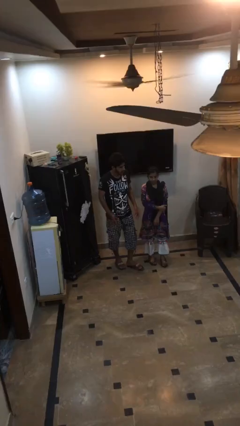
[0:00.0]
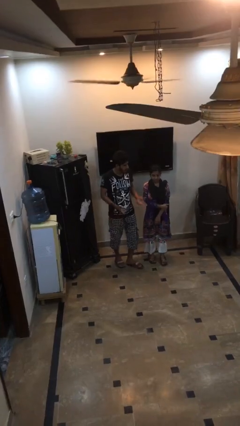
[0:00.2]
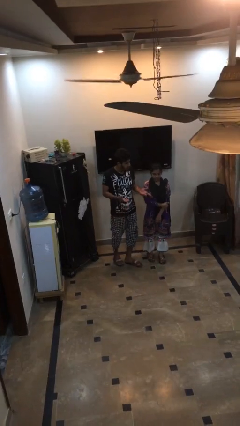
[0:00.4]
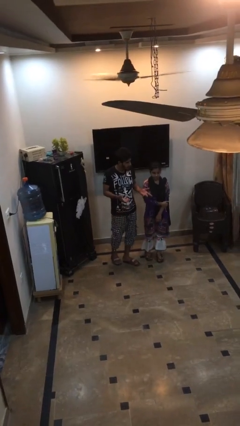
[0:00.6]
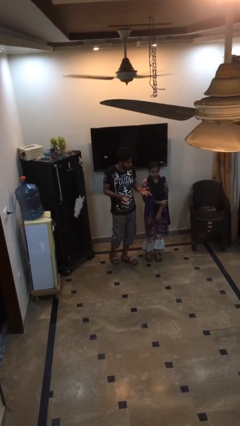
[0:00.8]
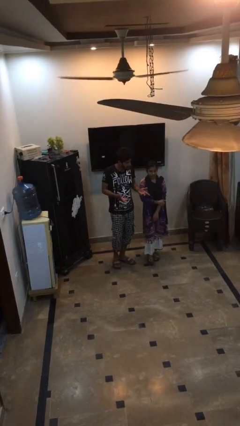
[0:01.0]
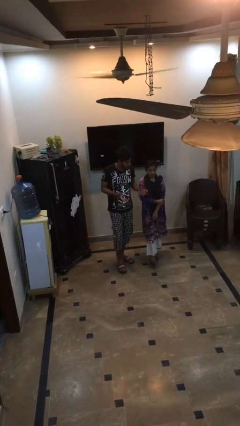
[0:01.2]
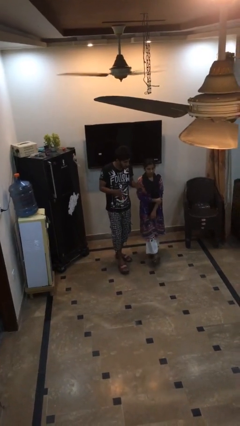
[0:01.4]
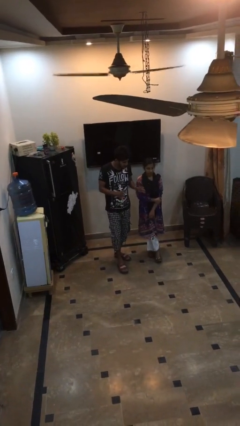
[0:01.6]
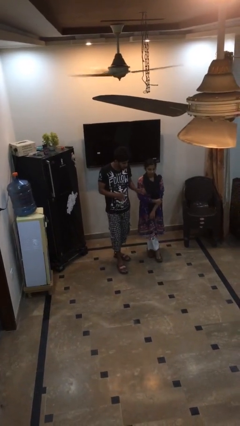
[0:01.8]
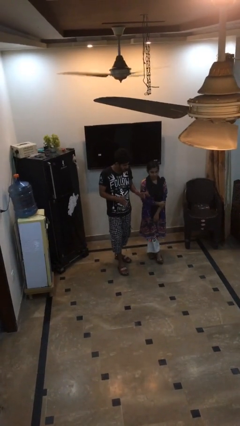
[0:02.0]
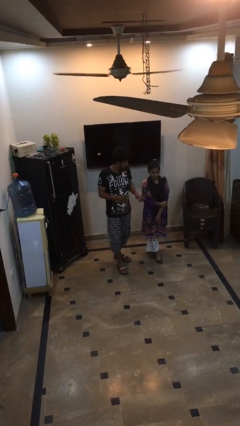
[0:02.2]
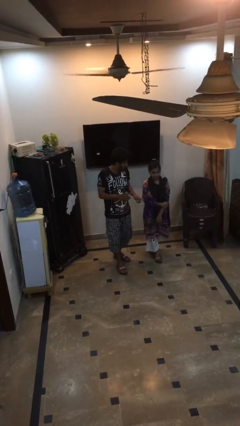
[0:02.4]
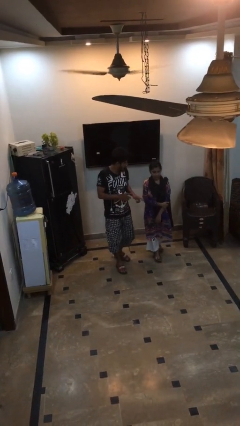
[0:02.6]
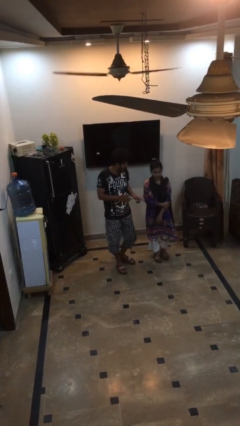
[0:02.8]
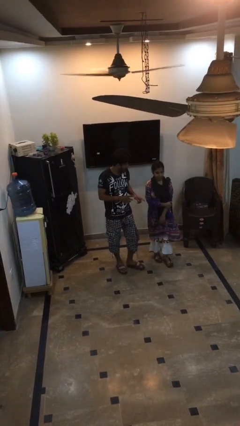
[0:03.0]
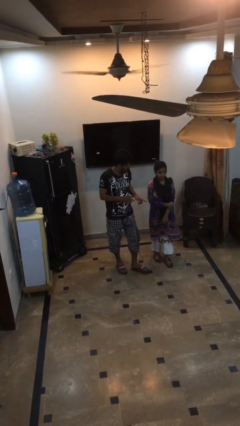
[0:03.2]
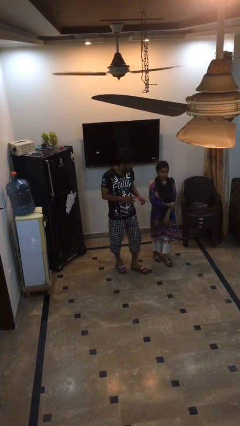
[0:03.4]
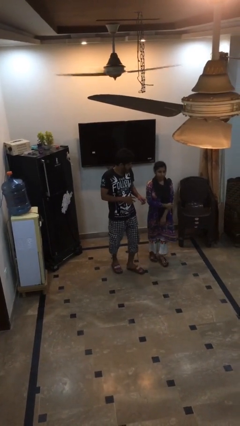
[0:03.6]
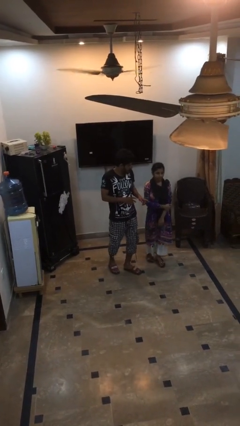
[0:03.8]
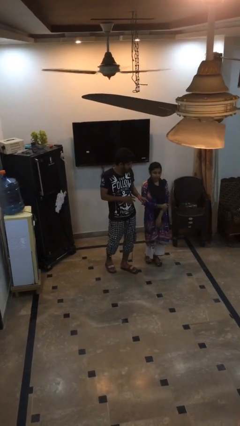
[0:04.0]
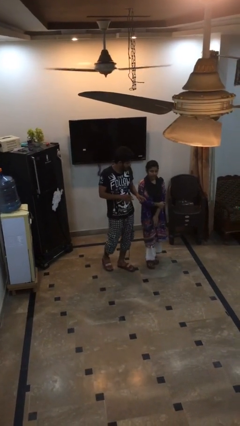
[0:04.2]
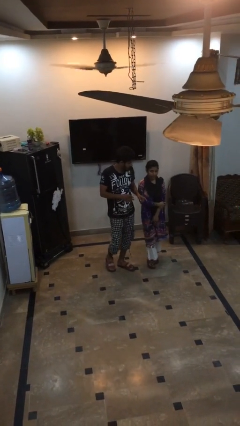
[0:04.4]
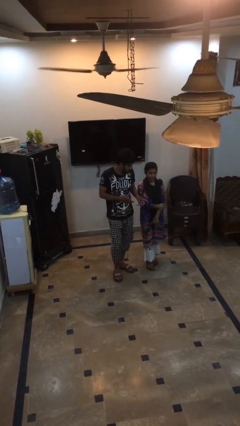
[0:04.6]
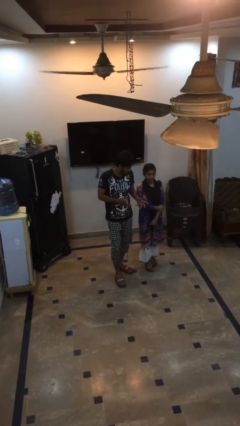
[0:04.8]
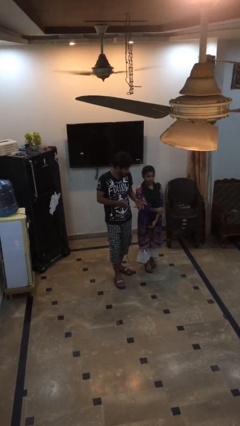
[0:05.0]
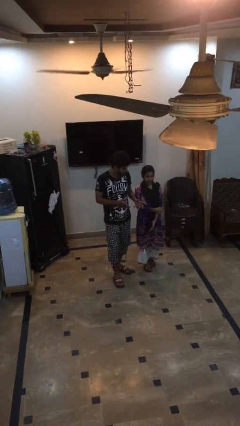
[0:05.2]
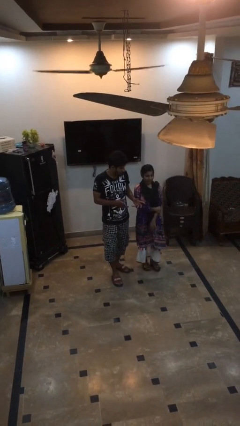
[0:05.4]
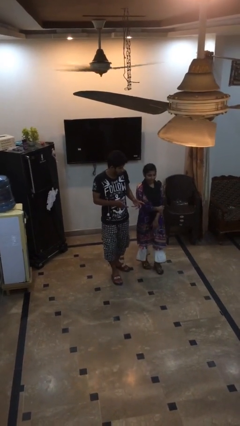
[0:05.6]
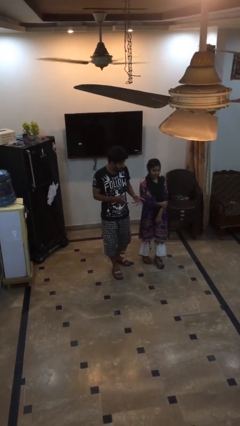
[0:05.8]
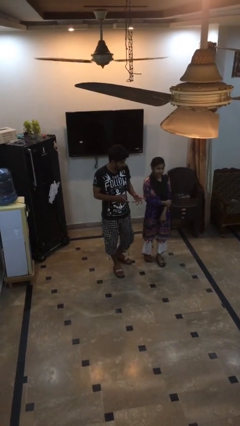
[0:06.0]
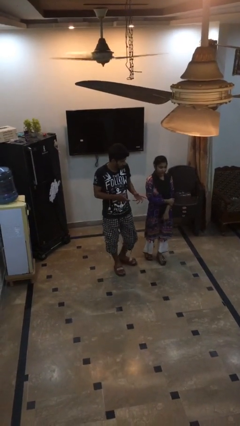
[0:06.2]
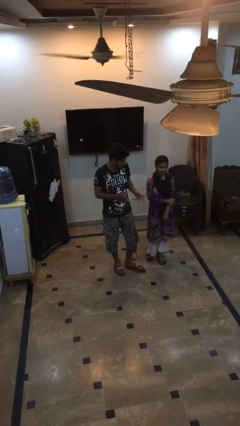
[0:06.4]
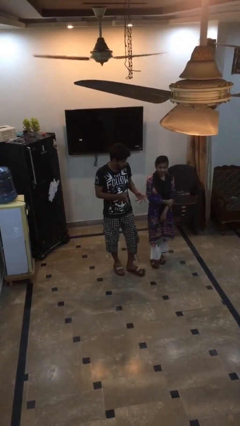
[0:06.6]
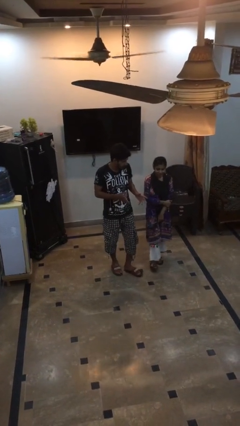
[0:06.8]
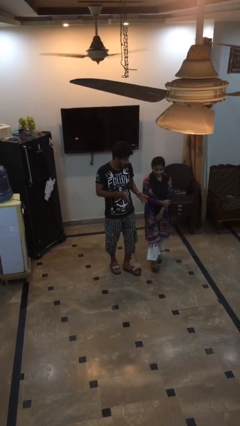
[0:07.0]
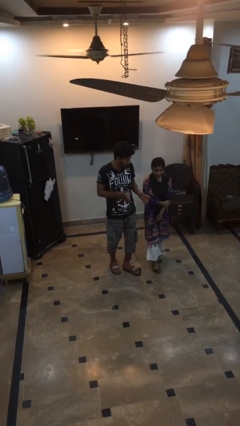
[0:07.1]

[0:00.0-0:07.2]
person talks to person

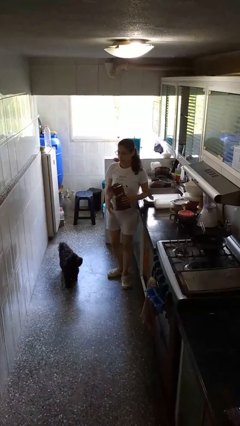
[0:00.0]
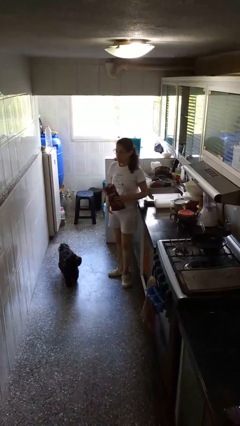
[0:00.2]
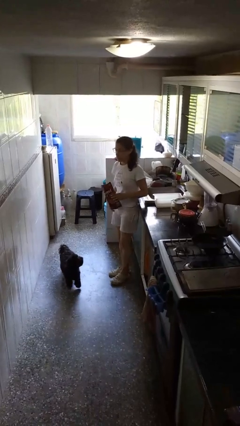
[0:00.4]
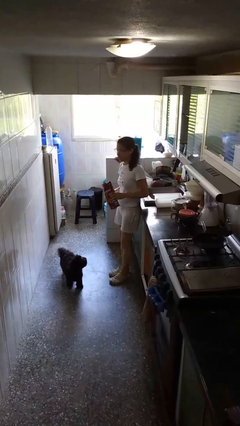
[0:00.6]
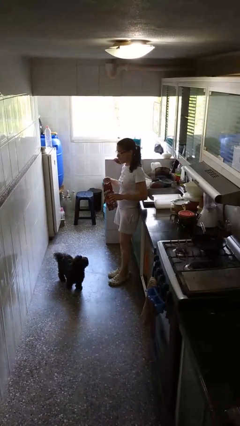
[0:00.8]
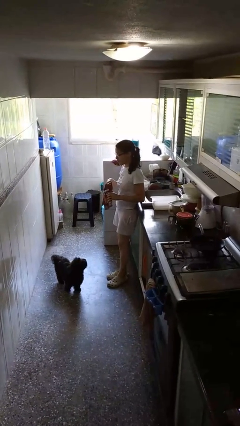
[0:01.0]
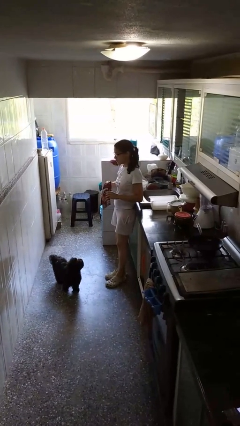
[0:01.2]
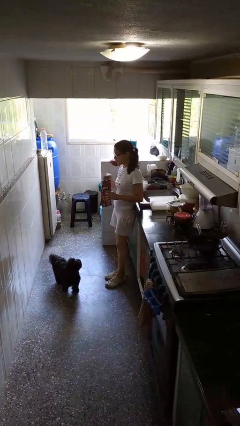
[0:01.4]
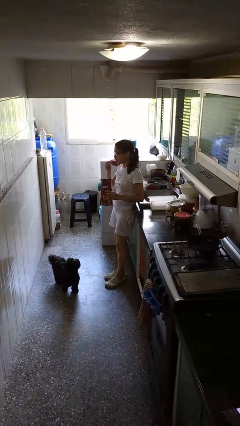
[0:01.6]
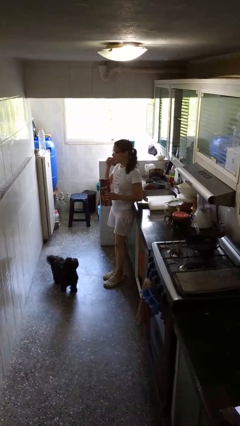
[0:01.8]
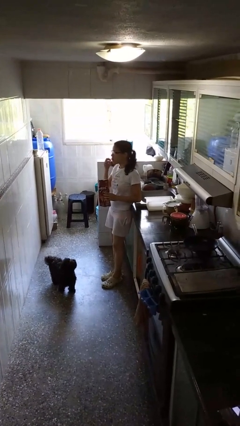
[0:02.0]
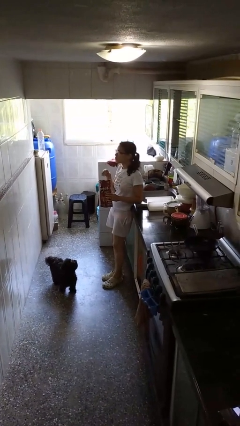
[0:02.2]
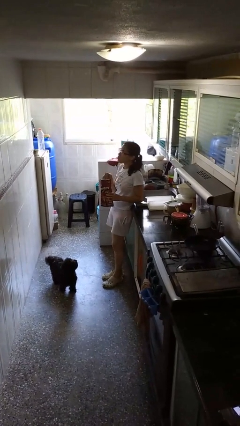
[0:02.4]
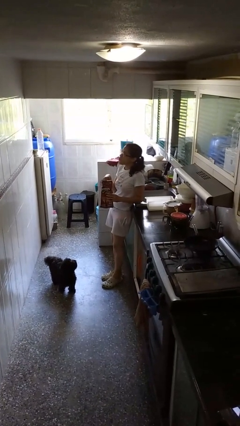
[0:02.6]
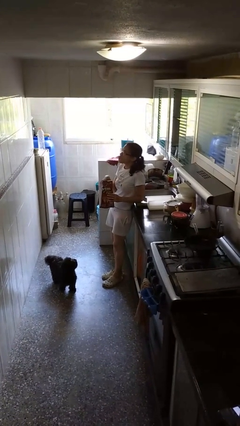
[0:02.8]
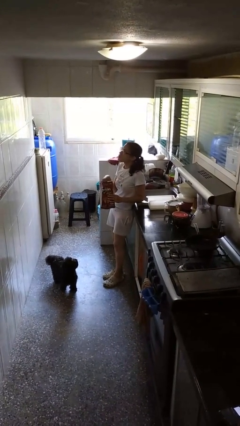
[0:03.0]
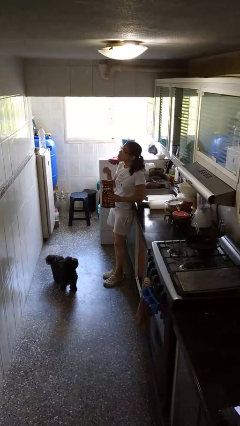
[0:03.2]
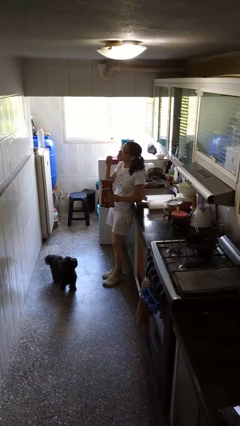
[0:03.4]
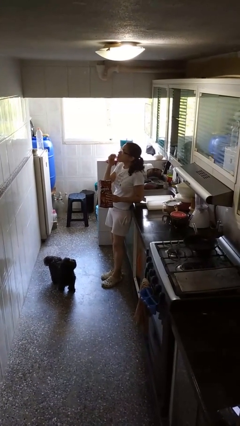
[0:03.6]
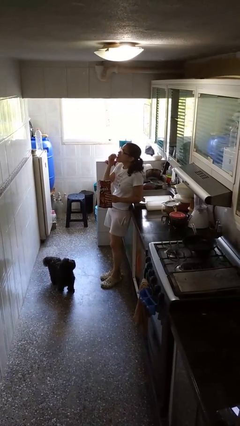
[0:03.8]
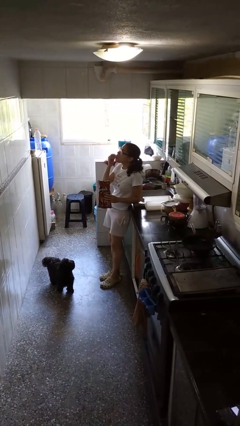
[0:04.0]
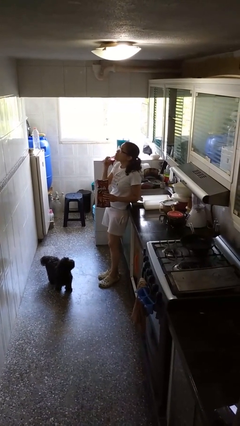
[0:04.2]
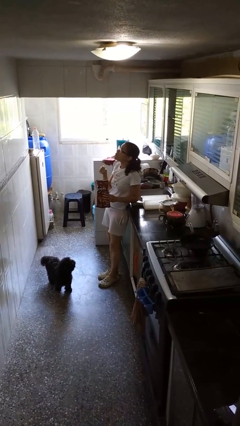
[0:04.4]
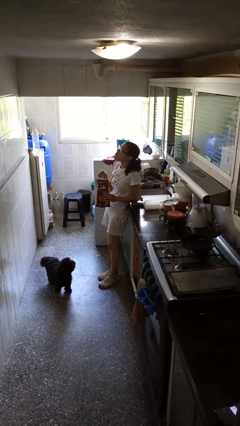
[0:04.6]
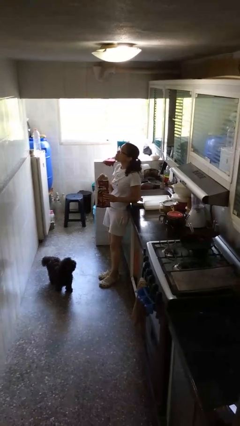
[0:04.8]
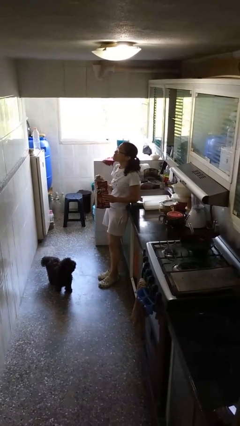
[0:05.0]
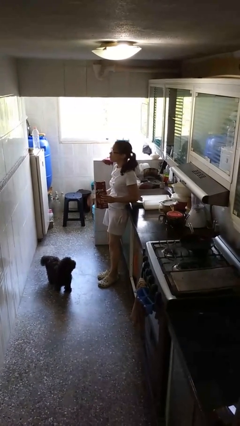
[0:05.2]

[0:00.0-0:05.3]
person eats snack from bag

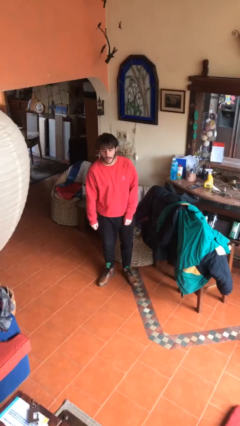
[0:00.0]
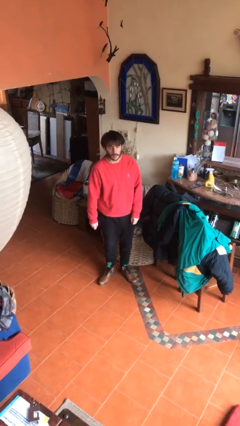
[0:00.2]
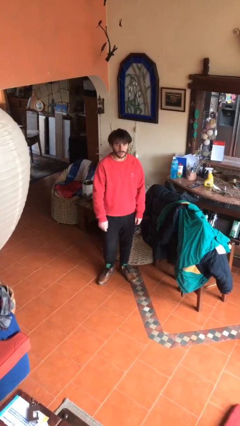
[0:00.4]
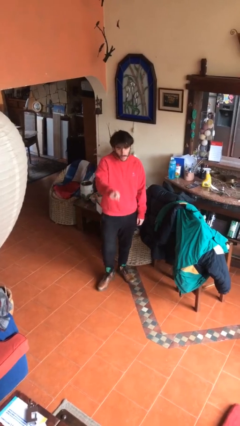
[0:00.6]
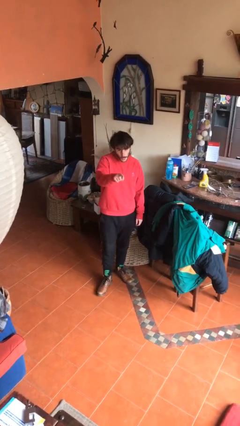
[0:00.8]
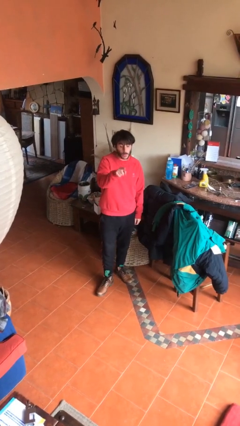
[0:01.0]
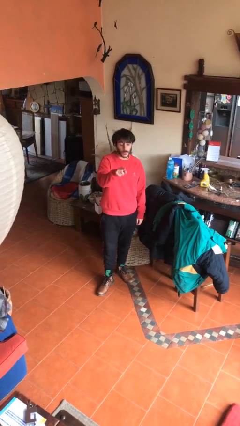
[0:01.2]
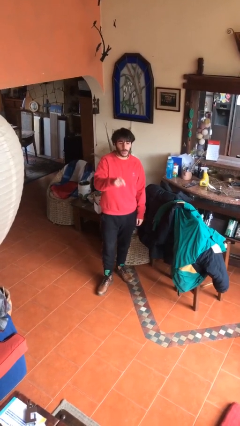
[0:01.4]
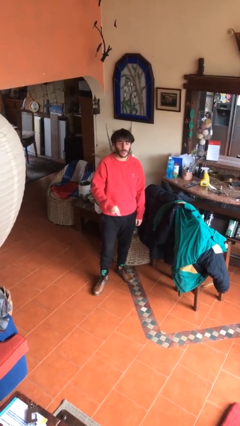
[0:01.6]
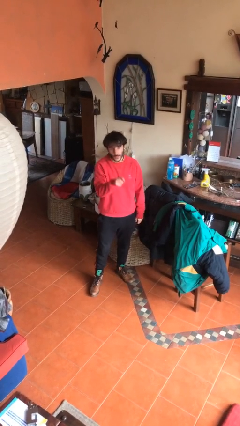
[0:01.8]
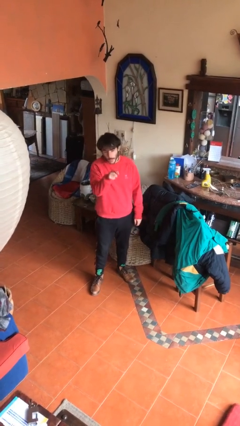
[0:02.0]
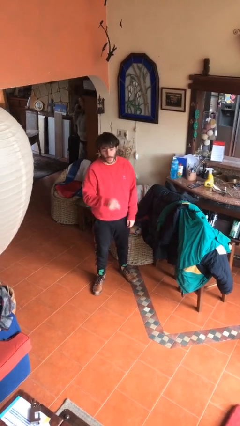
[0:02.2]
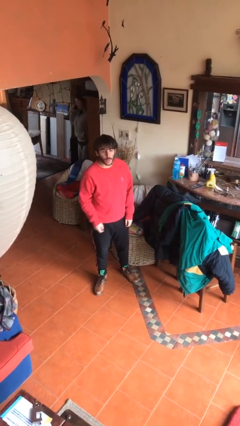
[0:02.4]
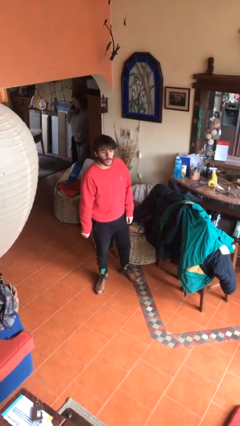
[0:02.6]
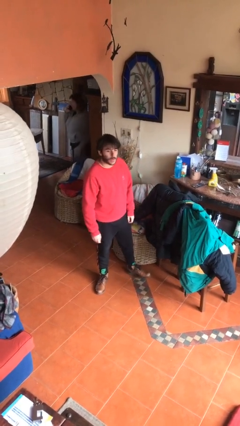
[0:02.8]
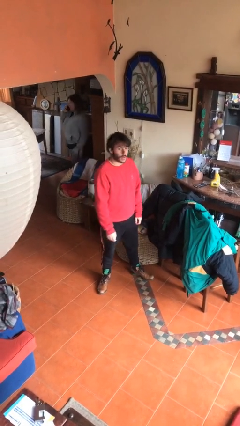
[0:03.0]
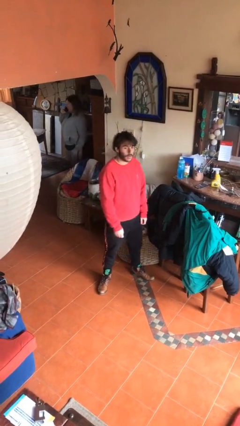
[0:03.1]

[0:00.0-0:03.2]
person points at person

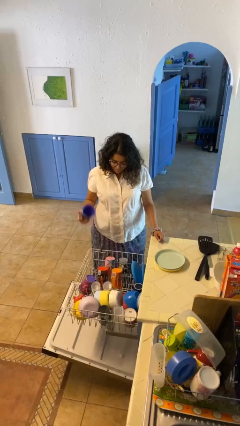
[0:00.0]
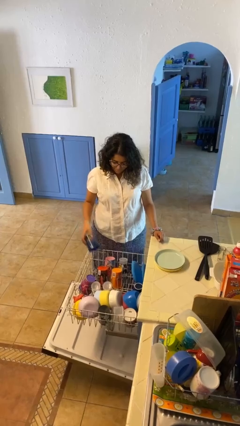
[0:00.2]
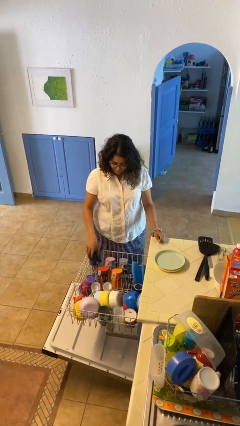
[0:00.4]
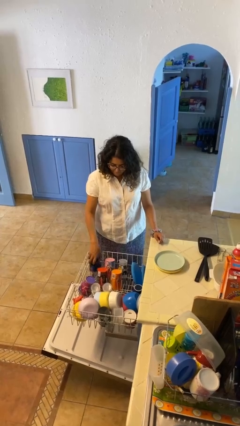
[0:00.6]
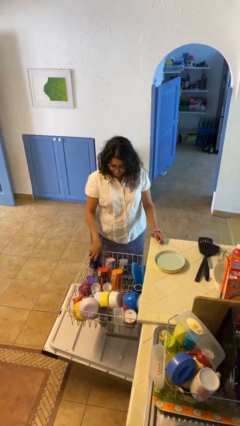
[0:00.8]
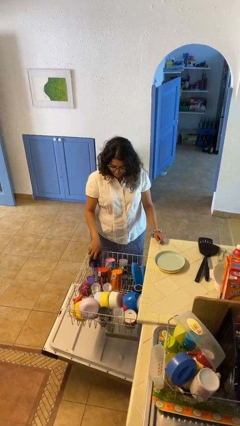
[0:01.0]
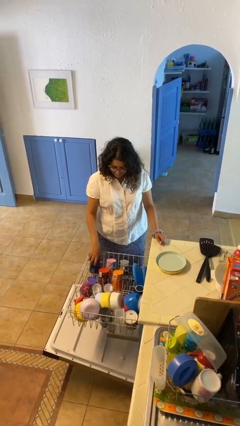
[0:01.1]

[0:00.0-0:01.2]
person loads dishwasher

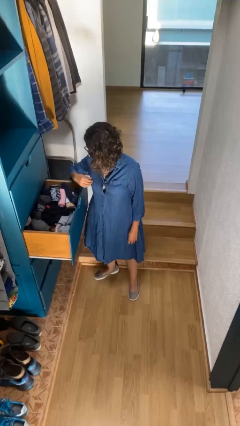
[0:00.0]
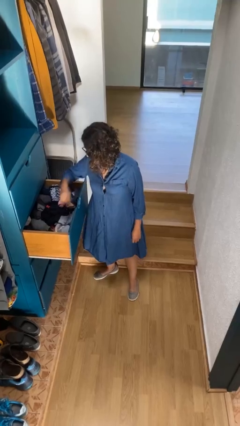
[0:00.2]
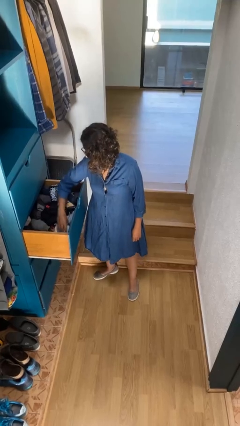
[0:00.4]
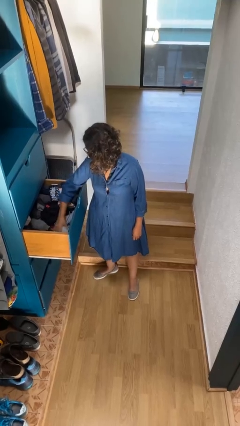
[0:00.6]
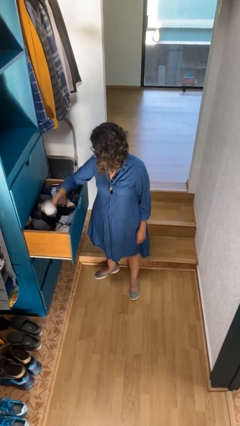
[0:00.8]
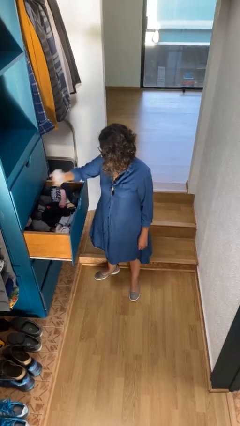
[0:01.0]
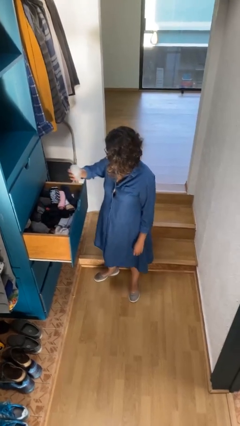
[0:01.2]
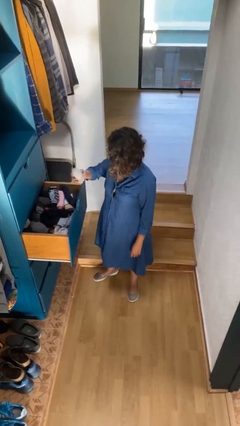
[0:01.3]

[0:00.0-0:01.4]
person takes clothes from dresser
